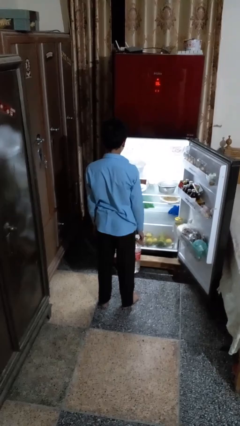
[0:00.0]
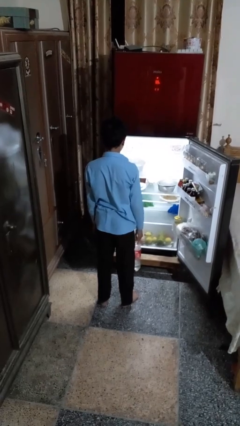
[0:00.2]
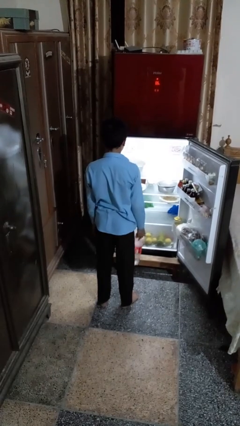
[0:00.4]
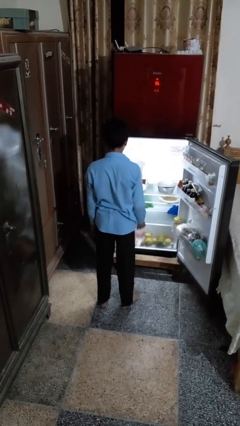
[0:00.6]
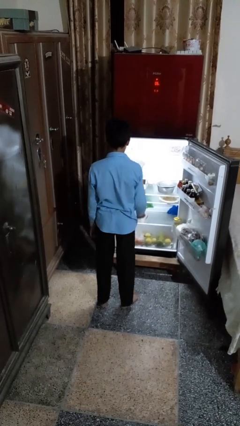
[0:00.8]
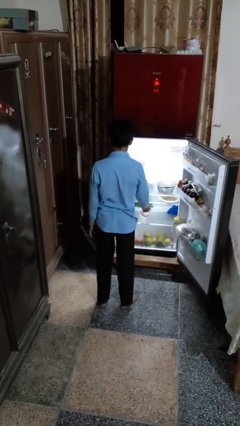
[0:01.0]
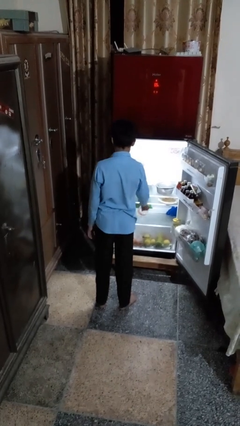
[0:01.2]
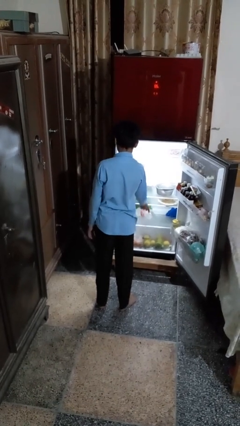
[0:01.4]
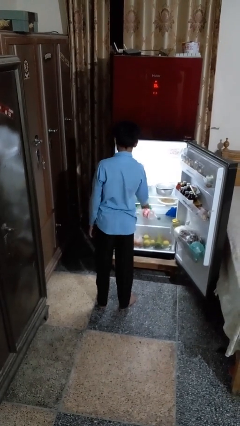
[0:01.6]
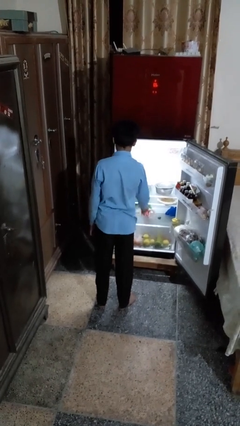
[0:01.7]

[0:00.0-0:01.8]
person puts object into refrigerator

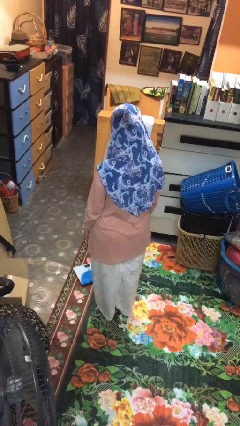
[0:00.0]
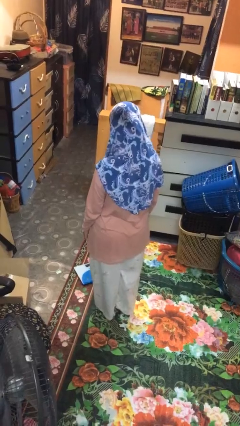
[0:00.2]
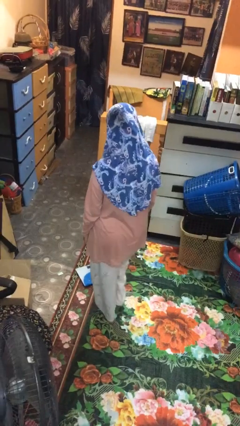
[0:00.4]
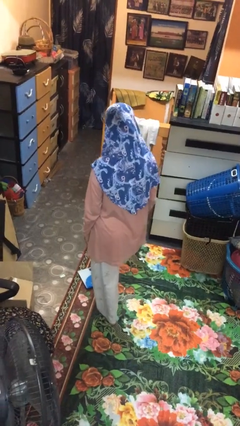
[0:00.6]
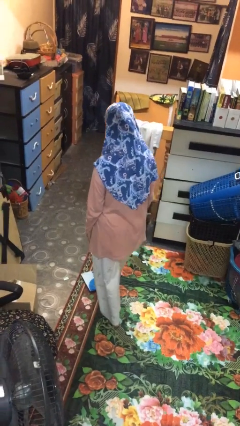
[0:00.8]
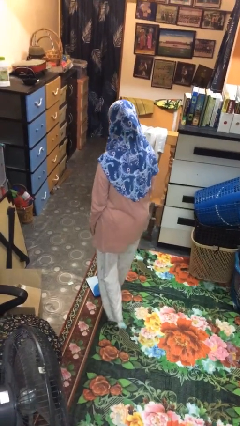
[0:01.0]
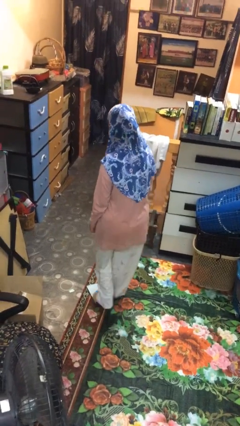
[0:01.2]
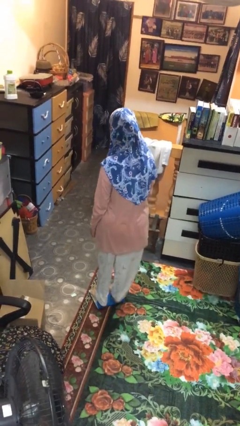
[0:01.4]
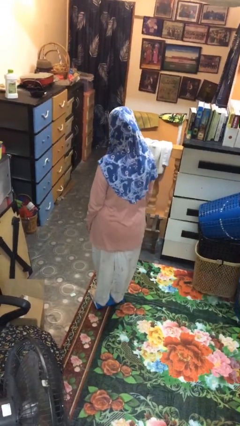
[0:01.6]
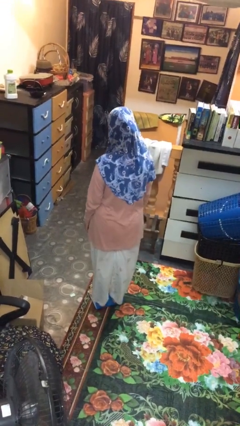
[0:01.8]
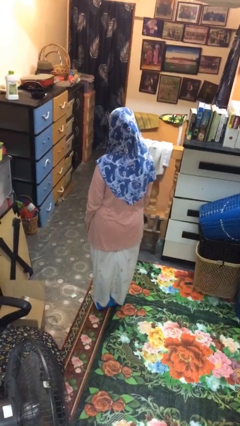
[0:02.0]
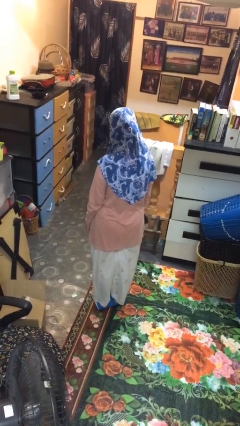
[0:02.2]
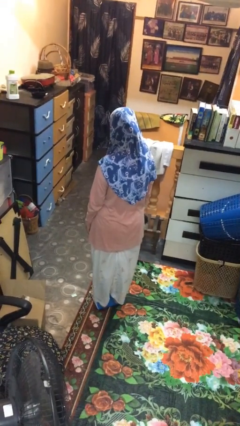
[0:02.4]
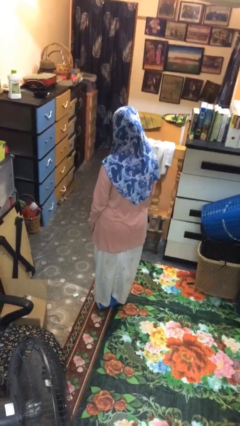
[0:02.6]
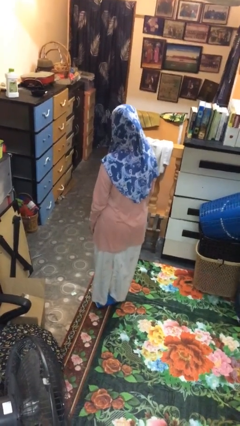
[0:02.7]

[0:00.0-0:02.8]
person uses bodyweight scale

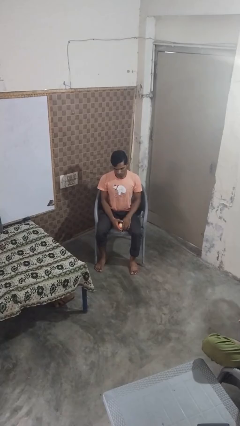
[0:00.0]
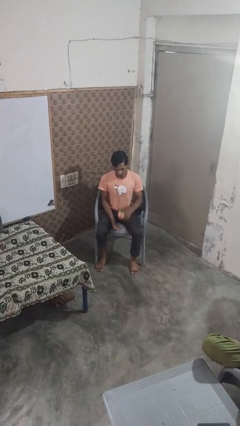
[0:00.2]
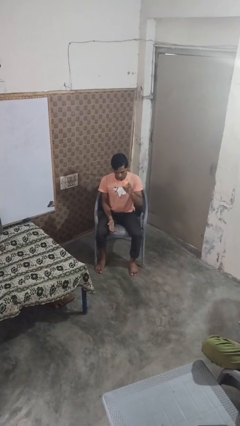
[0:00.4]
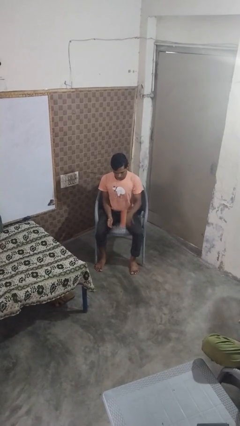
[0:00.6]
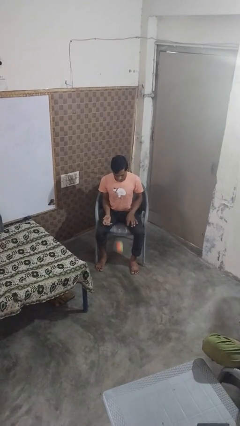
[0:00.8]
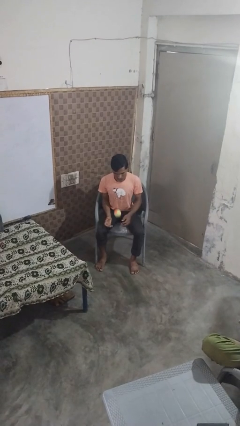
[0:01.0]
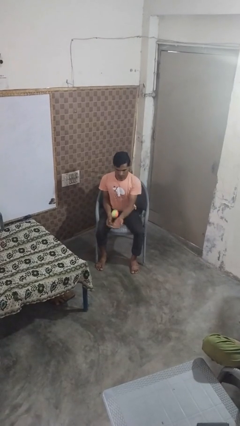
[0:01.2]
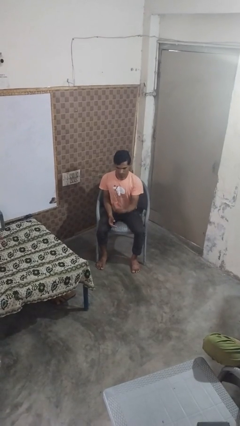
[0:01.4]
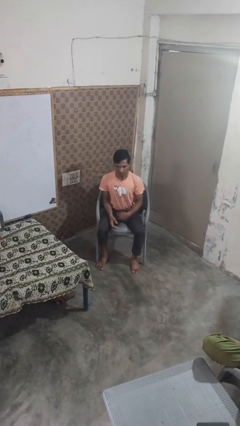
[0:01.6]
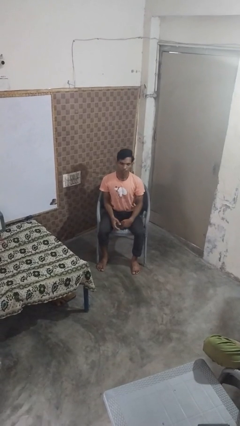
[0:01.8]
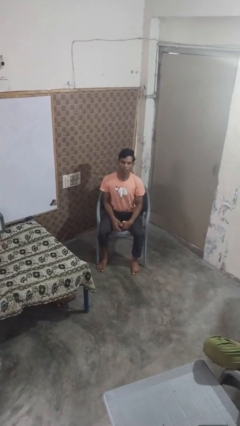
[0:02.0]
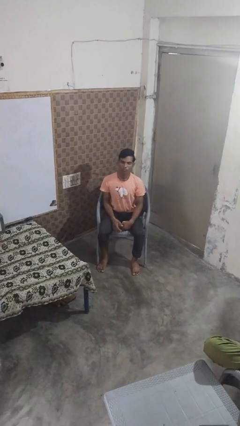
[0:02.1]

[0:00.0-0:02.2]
person bounces ball on floor

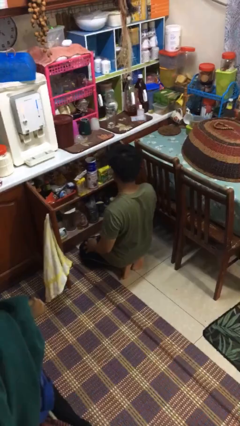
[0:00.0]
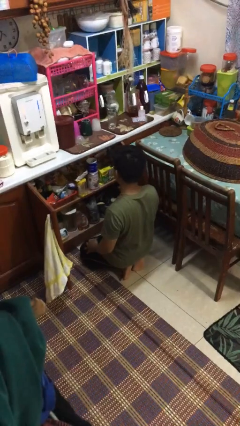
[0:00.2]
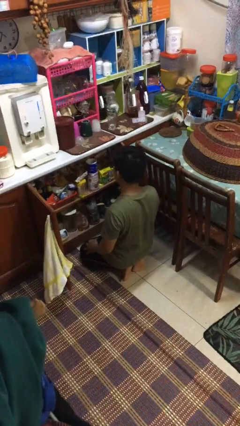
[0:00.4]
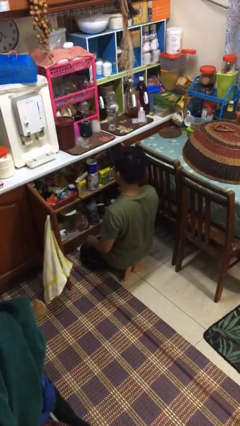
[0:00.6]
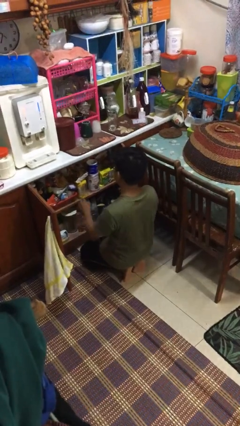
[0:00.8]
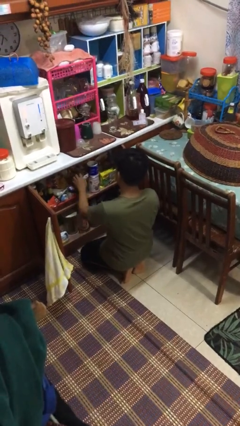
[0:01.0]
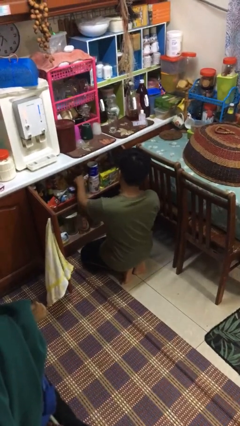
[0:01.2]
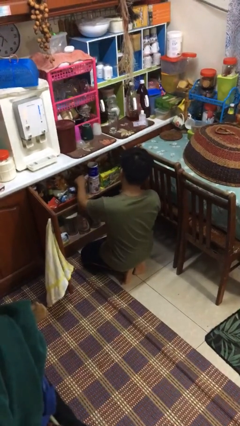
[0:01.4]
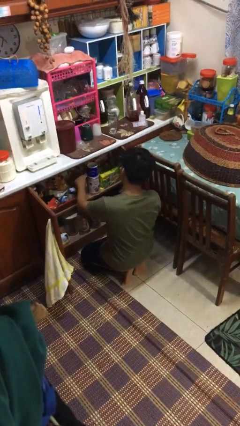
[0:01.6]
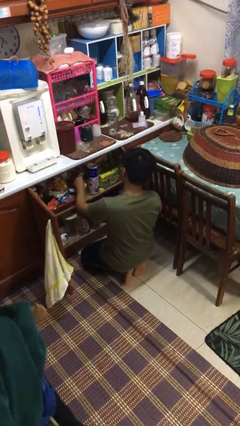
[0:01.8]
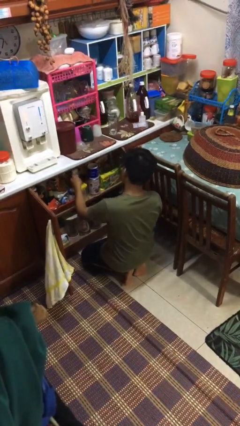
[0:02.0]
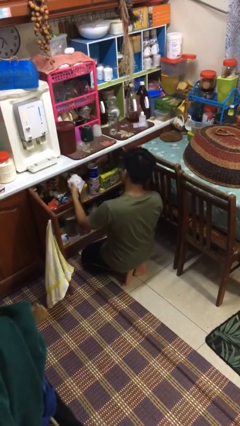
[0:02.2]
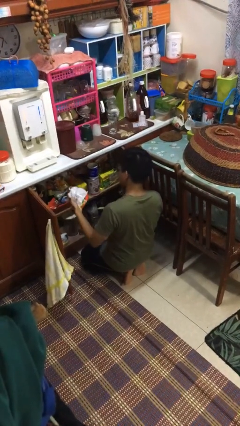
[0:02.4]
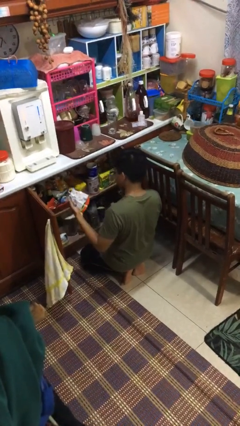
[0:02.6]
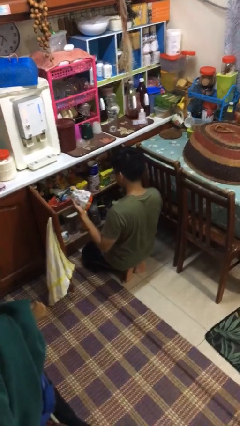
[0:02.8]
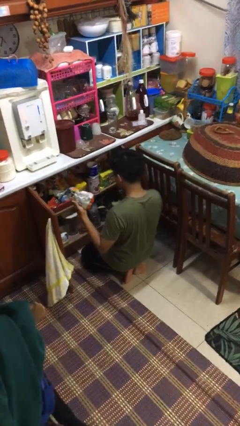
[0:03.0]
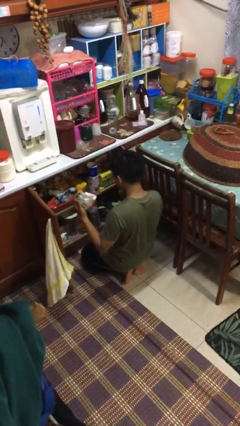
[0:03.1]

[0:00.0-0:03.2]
person takes object from cabinet

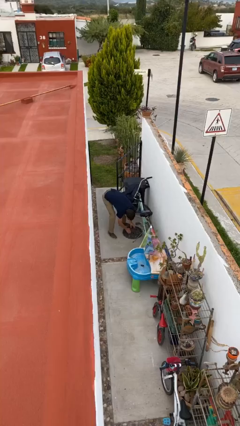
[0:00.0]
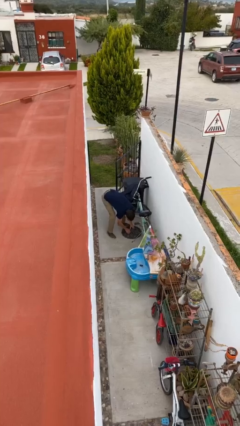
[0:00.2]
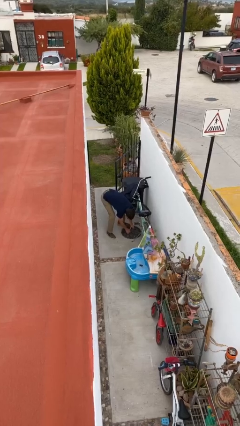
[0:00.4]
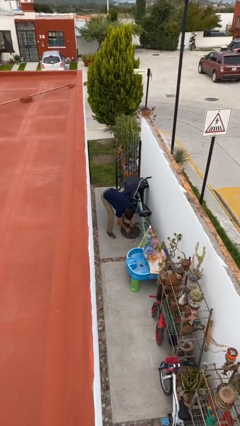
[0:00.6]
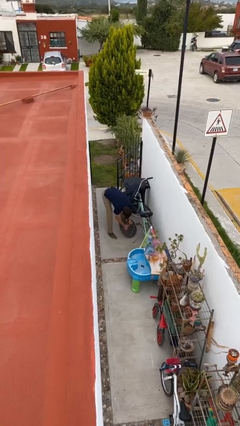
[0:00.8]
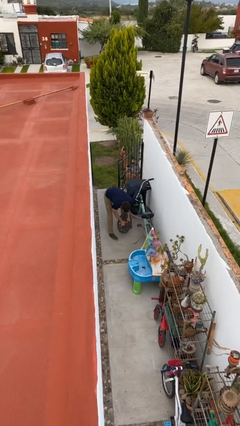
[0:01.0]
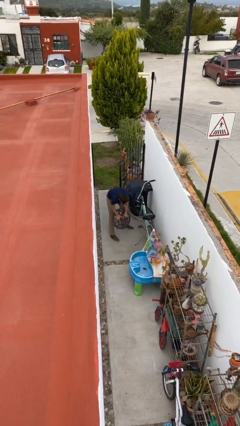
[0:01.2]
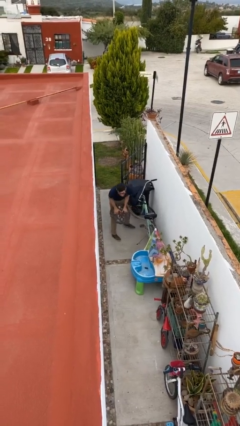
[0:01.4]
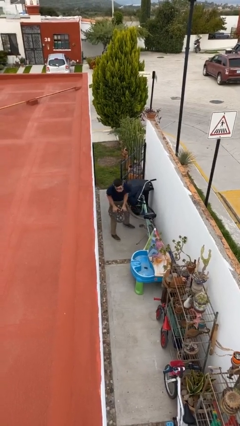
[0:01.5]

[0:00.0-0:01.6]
person picks up object from floor

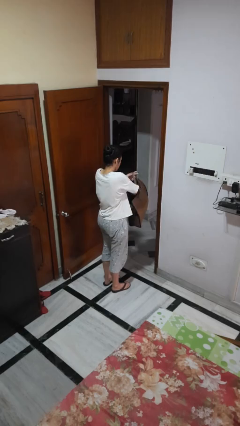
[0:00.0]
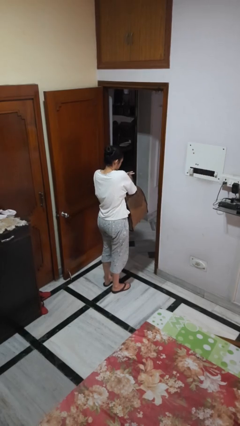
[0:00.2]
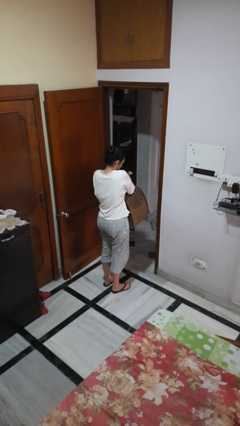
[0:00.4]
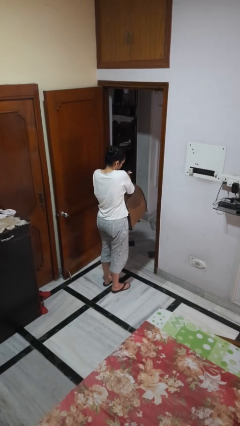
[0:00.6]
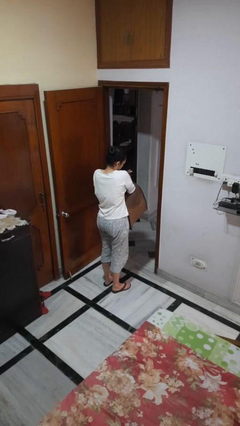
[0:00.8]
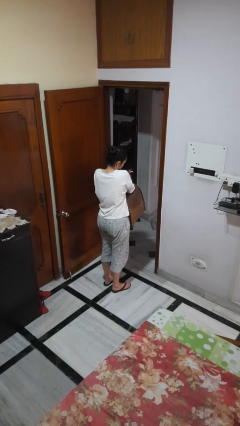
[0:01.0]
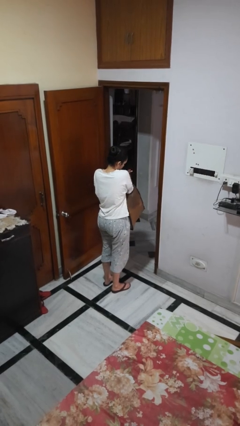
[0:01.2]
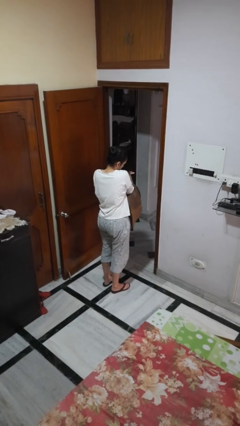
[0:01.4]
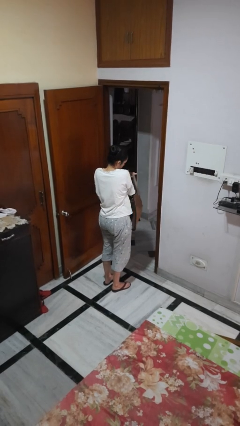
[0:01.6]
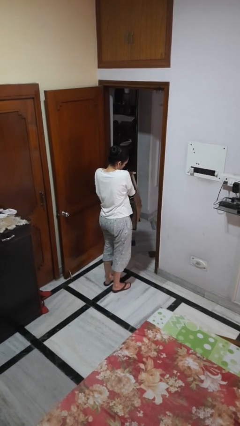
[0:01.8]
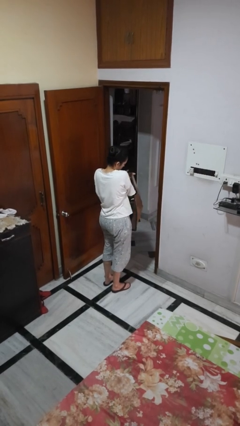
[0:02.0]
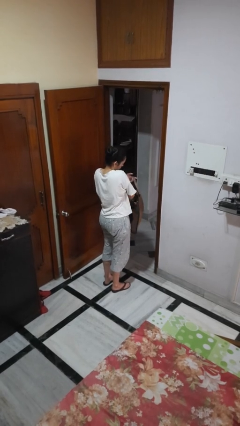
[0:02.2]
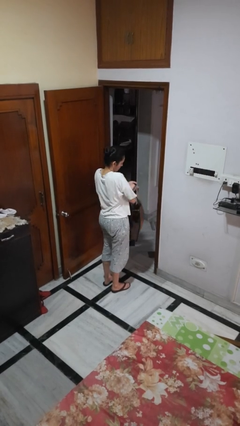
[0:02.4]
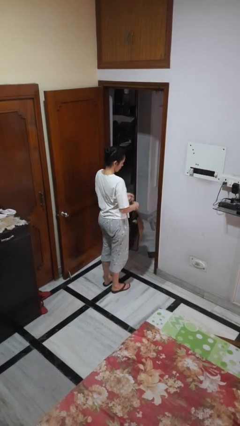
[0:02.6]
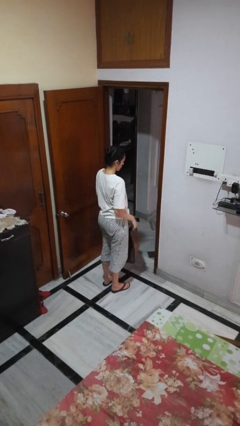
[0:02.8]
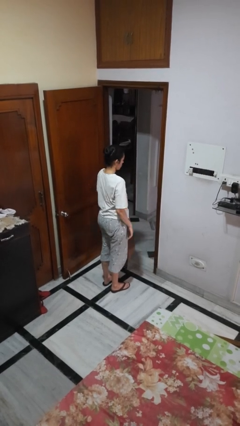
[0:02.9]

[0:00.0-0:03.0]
person searches in bag

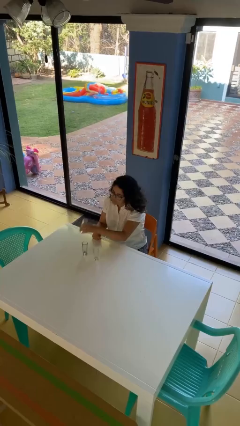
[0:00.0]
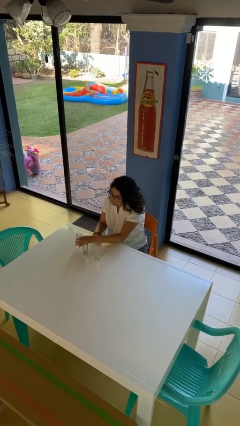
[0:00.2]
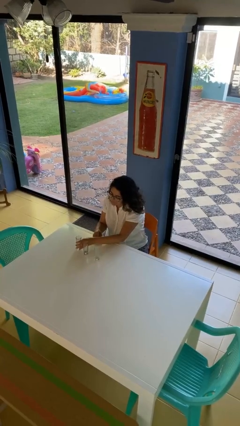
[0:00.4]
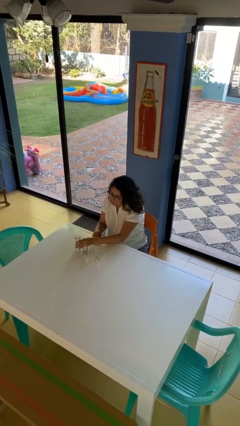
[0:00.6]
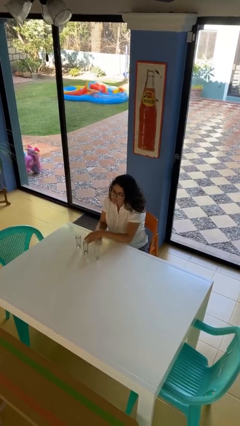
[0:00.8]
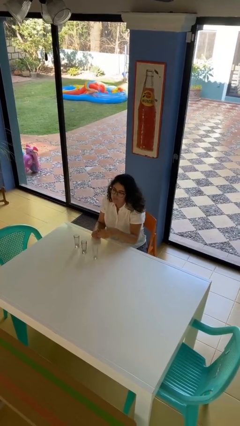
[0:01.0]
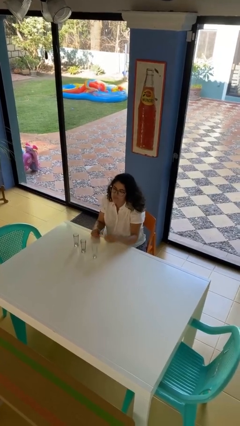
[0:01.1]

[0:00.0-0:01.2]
person puts down object on table

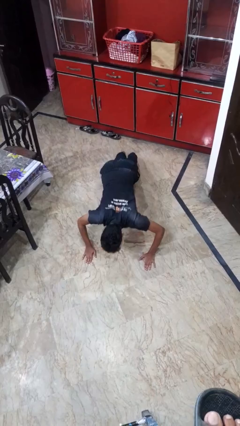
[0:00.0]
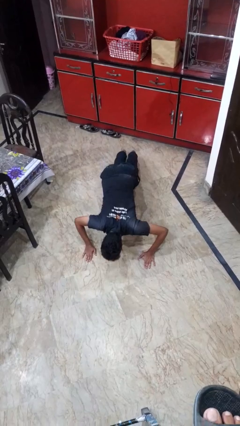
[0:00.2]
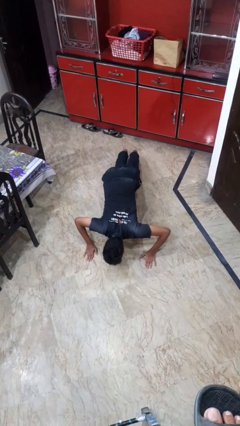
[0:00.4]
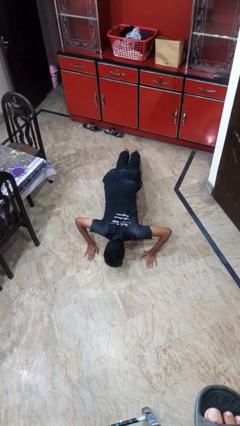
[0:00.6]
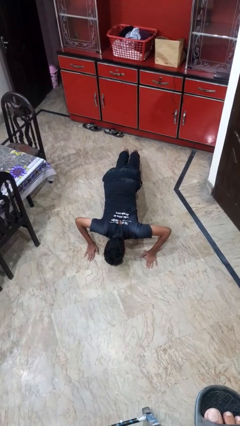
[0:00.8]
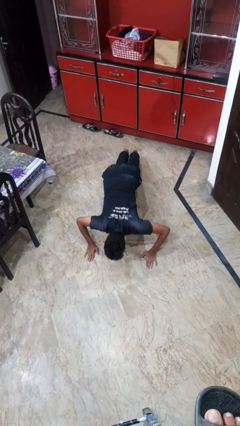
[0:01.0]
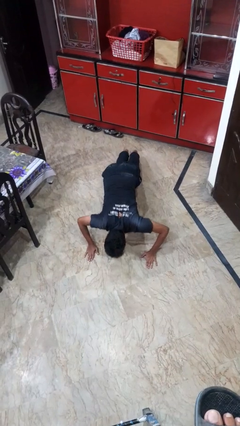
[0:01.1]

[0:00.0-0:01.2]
person exercises with pushup
